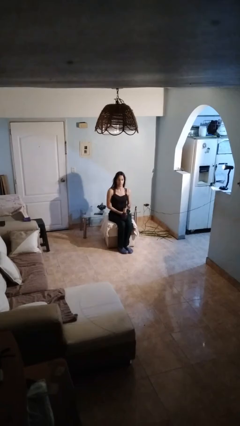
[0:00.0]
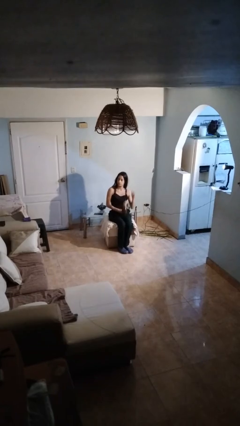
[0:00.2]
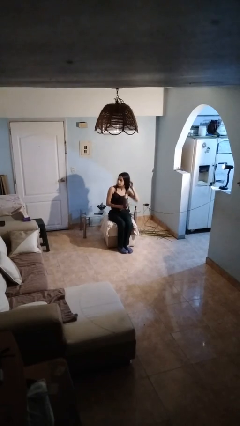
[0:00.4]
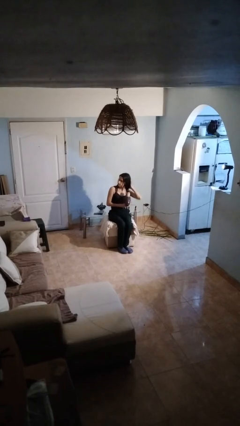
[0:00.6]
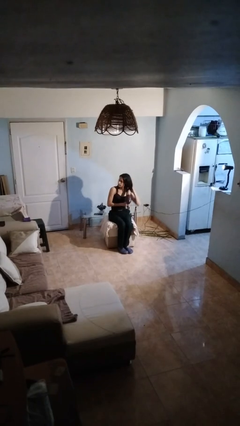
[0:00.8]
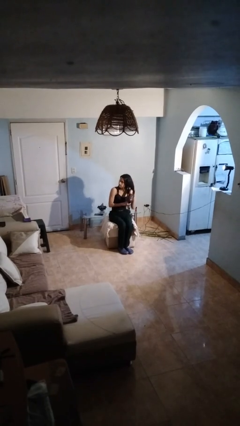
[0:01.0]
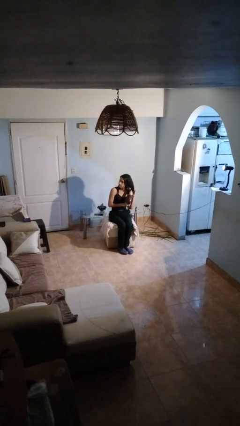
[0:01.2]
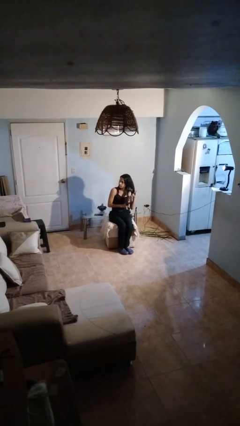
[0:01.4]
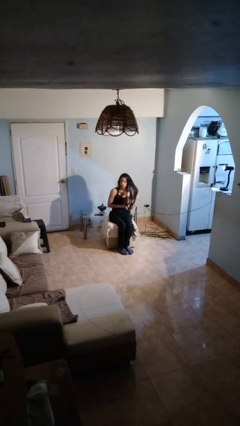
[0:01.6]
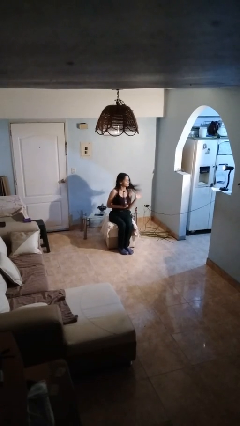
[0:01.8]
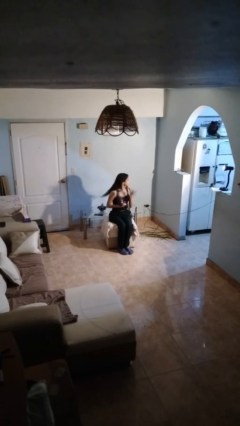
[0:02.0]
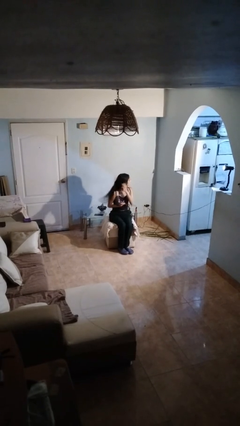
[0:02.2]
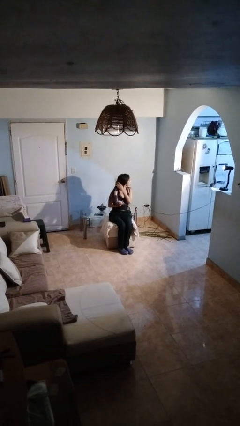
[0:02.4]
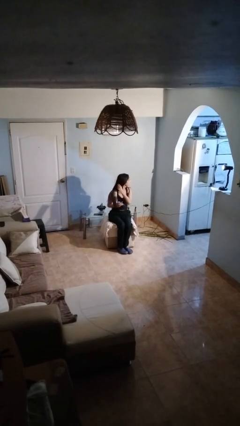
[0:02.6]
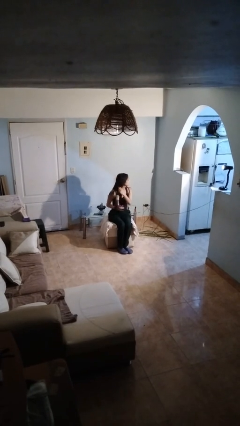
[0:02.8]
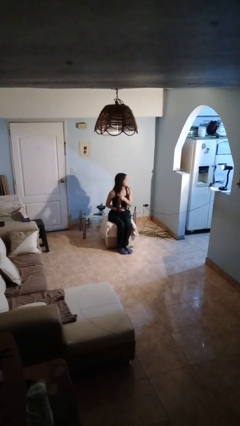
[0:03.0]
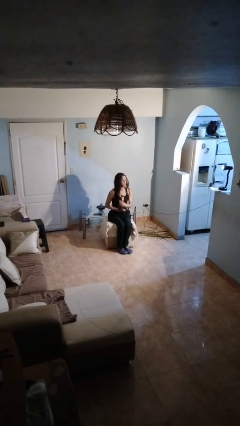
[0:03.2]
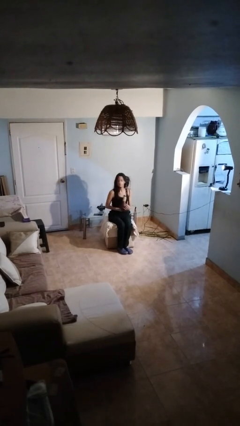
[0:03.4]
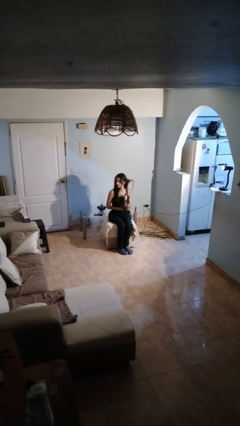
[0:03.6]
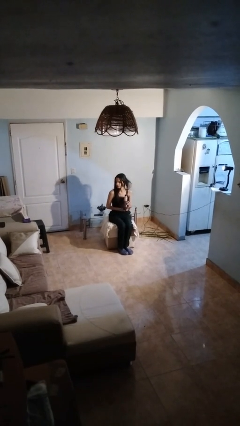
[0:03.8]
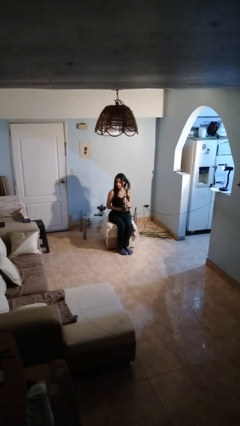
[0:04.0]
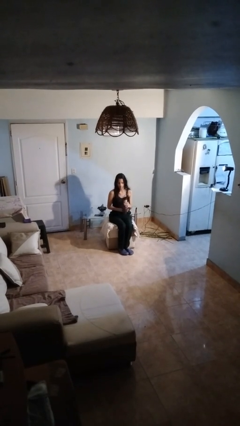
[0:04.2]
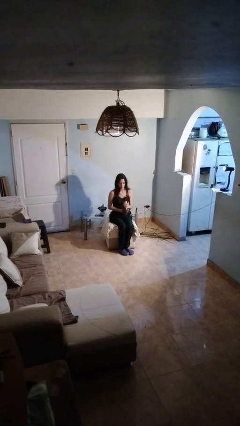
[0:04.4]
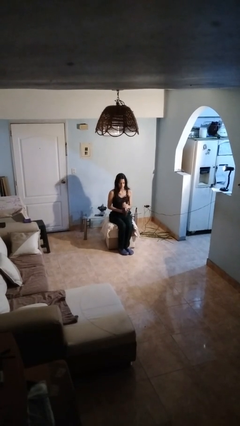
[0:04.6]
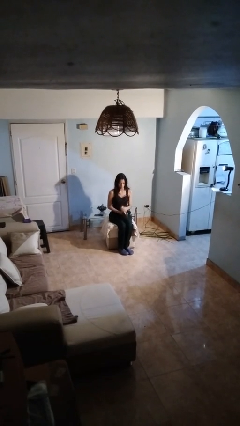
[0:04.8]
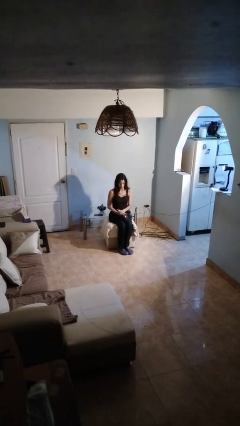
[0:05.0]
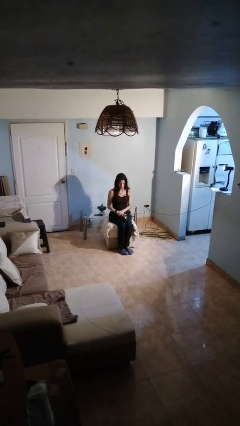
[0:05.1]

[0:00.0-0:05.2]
person dries hair with hairdryer

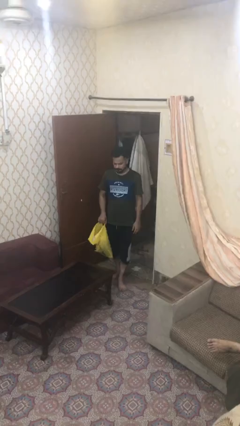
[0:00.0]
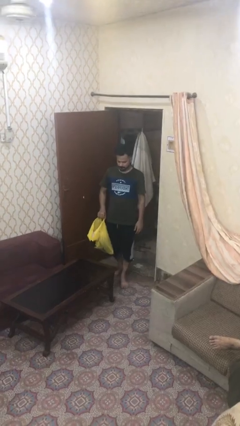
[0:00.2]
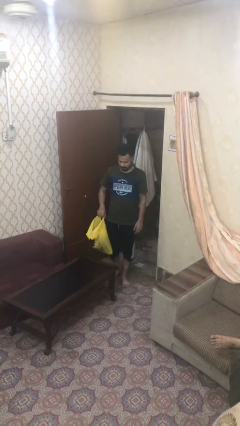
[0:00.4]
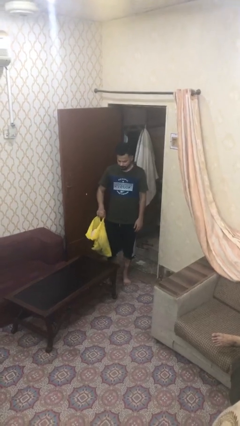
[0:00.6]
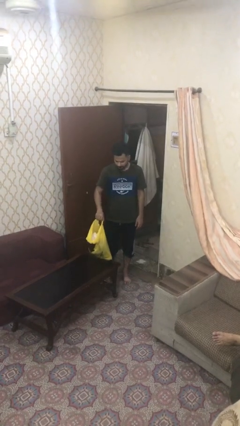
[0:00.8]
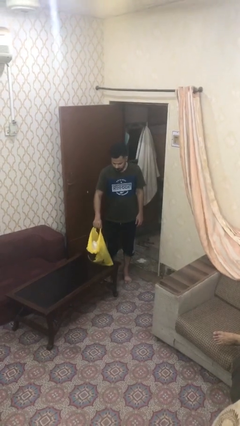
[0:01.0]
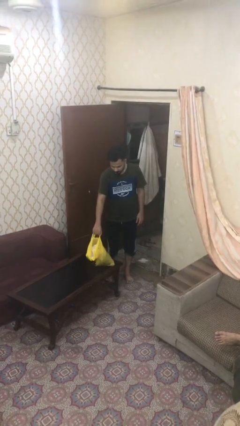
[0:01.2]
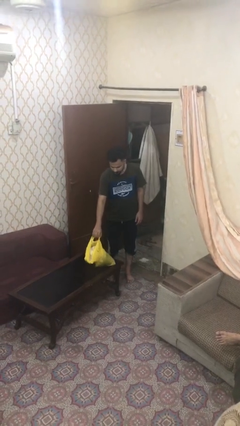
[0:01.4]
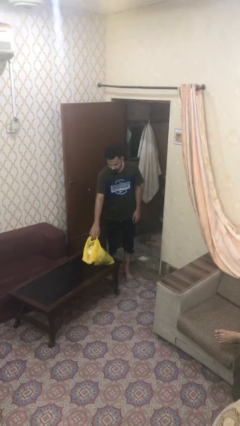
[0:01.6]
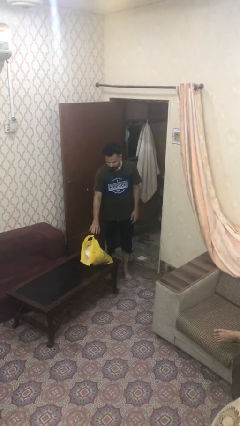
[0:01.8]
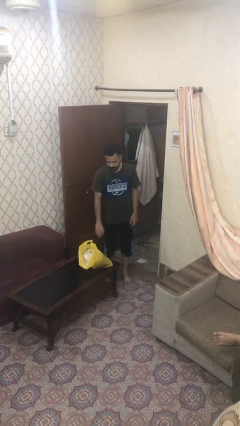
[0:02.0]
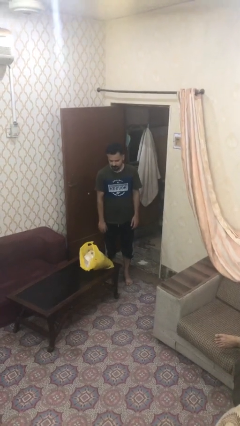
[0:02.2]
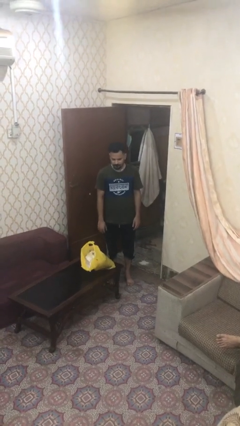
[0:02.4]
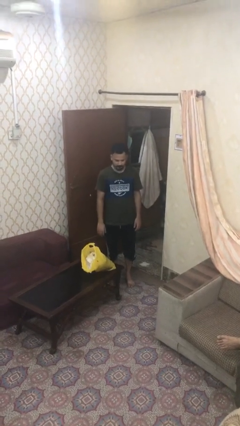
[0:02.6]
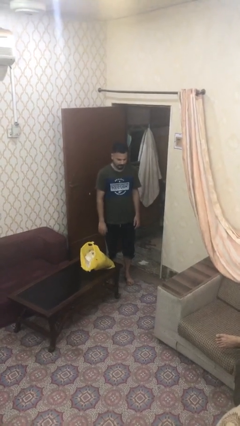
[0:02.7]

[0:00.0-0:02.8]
person puts down object on table

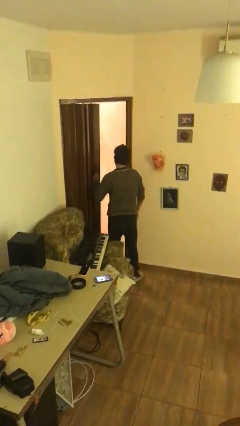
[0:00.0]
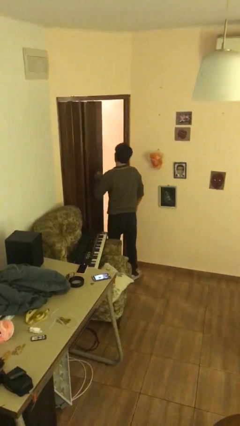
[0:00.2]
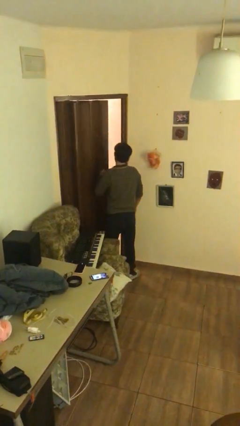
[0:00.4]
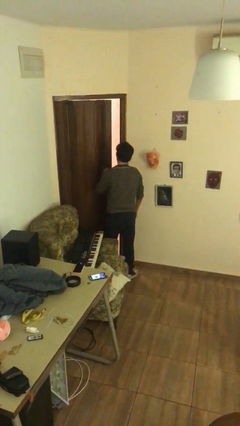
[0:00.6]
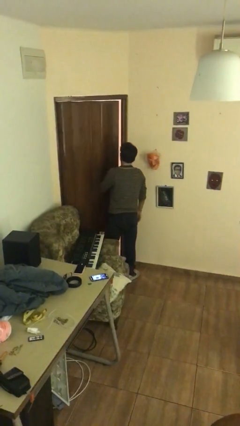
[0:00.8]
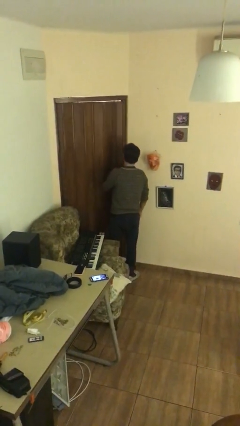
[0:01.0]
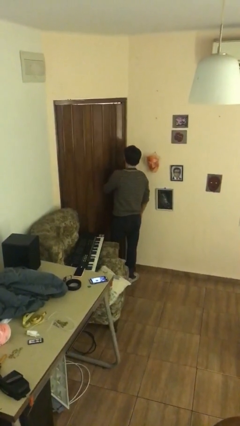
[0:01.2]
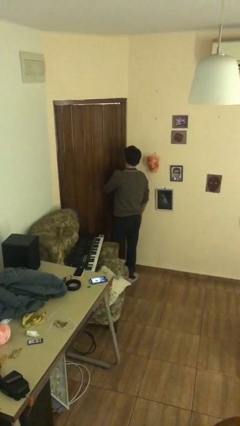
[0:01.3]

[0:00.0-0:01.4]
person closes sliding door

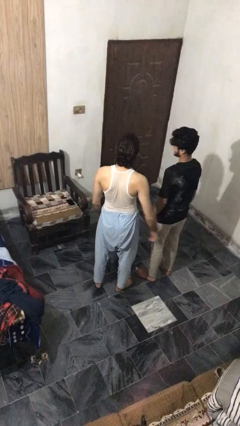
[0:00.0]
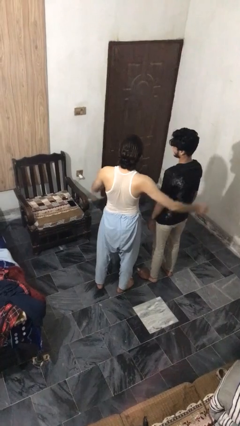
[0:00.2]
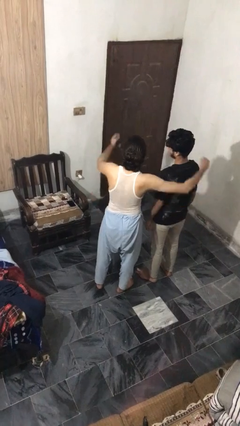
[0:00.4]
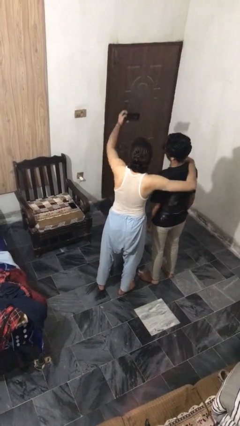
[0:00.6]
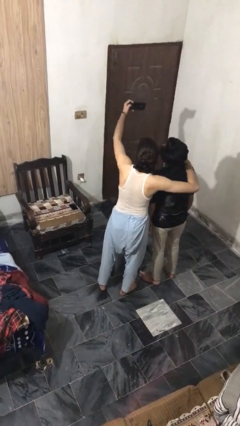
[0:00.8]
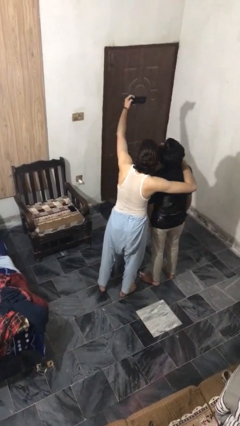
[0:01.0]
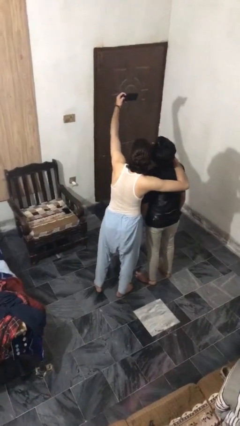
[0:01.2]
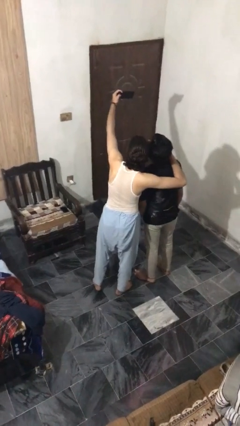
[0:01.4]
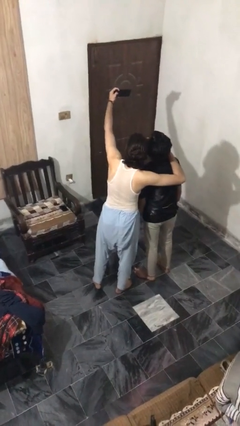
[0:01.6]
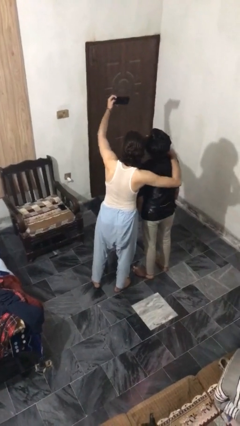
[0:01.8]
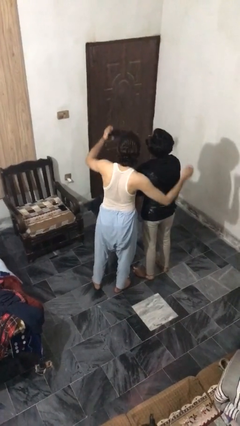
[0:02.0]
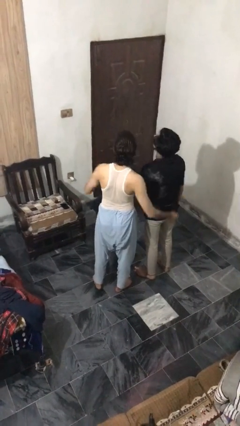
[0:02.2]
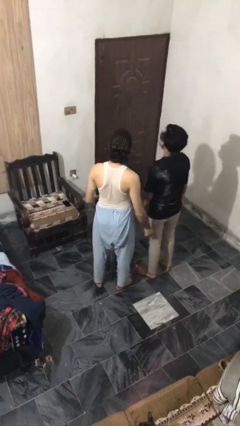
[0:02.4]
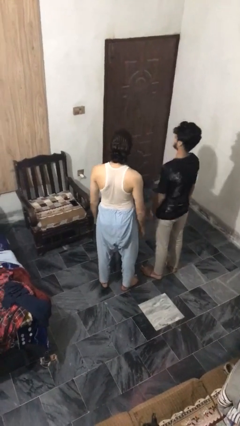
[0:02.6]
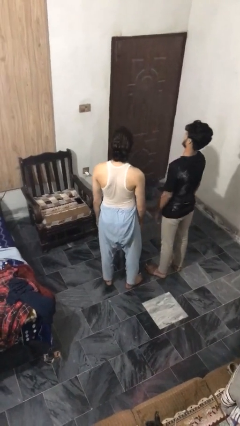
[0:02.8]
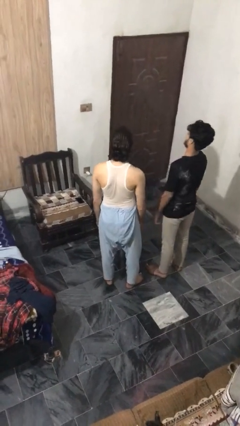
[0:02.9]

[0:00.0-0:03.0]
person takes selfie with person

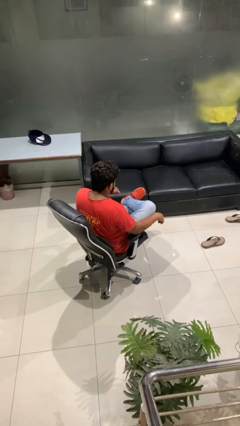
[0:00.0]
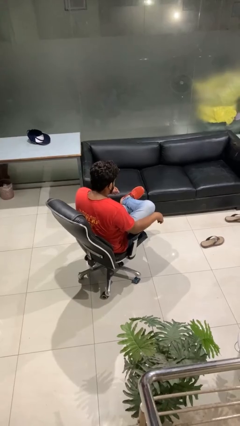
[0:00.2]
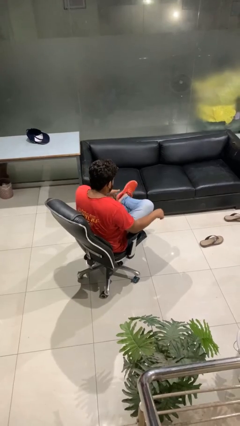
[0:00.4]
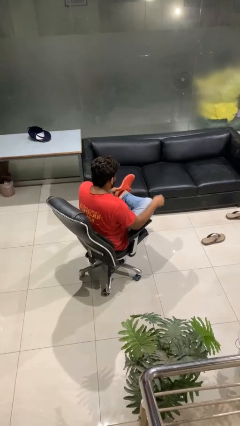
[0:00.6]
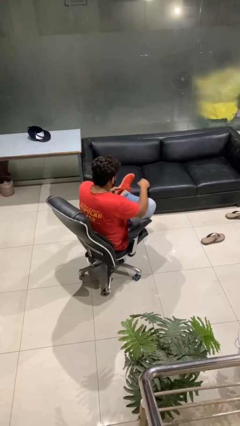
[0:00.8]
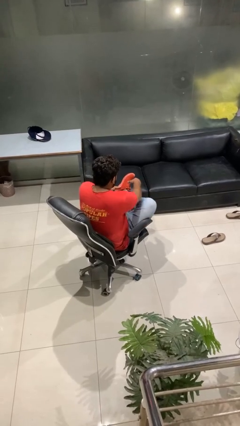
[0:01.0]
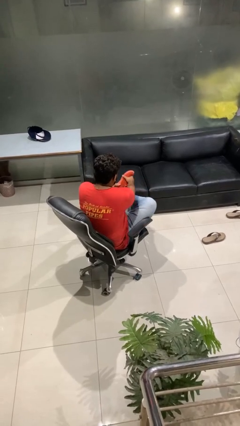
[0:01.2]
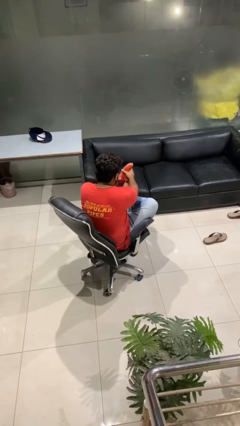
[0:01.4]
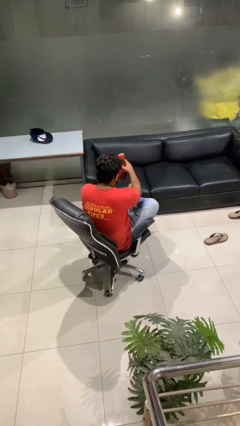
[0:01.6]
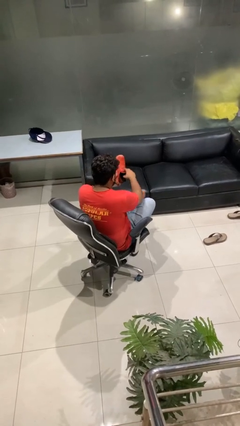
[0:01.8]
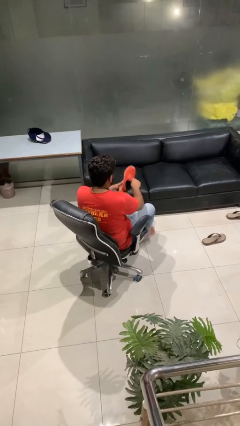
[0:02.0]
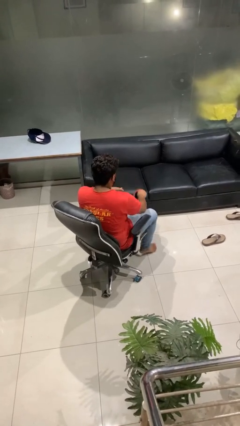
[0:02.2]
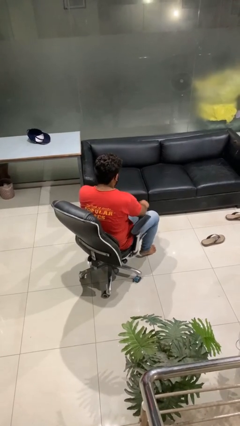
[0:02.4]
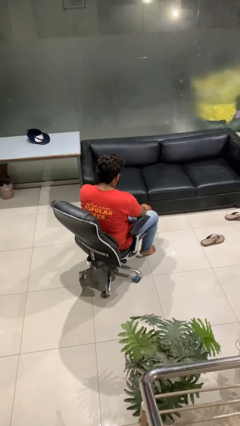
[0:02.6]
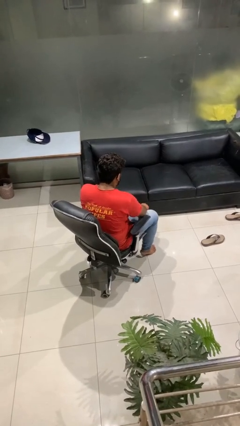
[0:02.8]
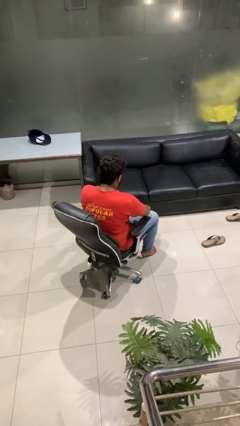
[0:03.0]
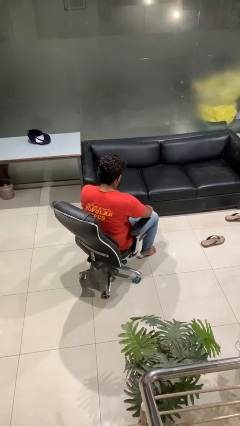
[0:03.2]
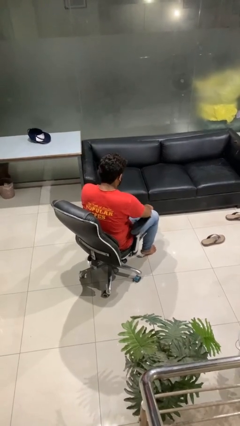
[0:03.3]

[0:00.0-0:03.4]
person takes off shoes

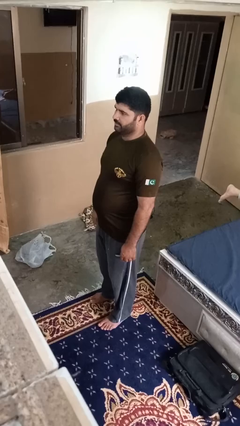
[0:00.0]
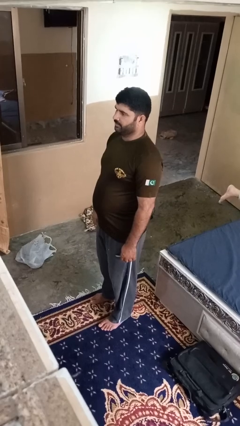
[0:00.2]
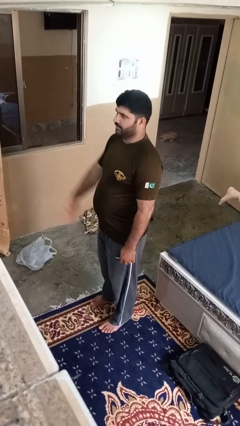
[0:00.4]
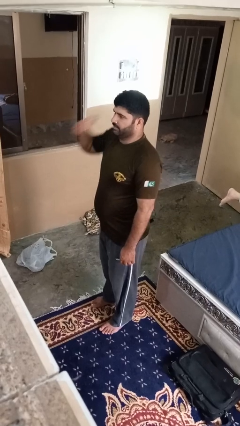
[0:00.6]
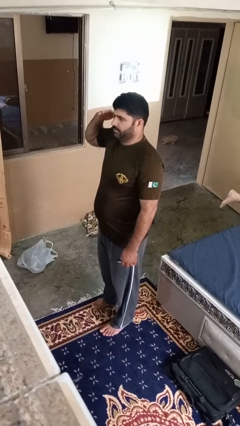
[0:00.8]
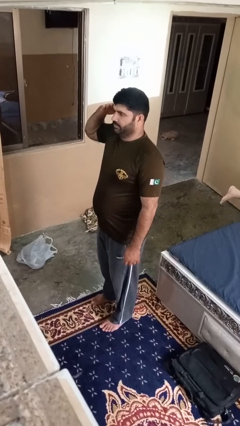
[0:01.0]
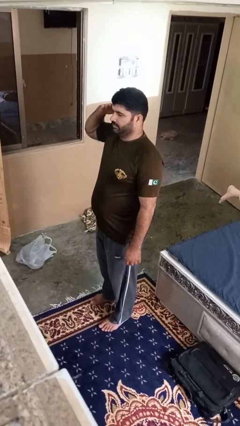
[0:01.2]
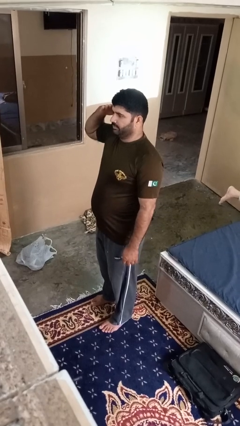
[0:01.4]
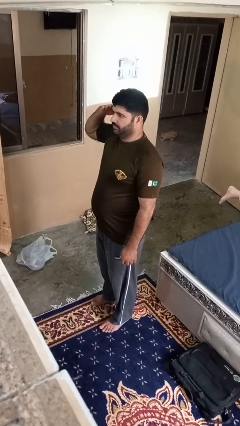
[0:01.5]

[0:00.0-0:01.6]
person salutes
